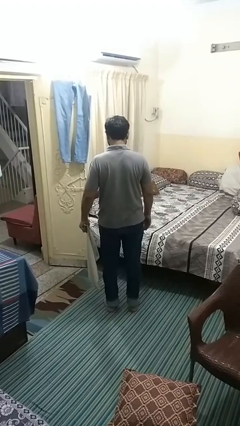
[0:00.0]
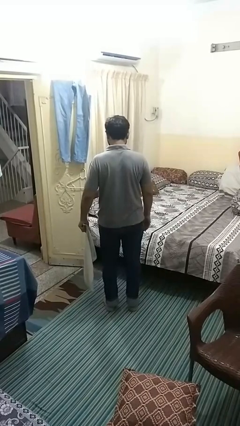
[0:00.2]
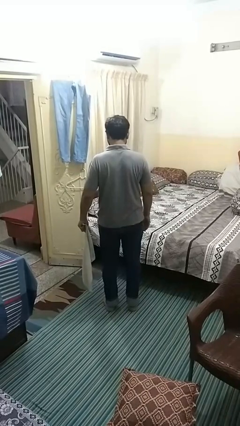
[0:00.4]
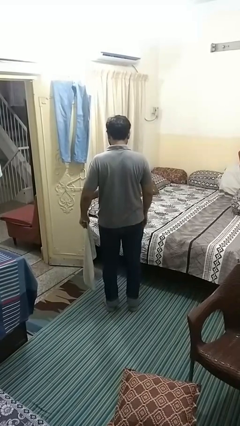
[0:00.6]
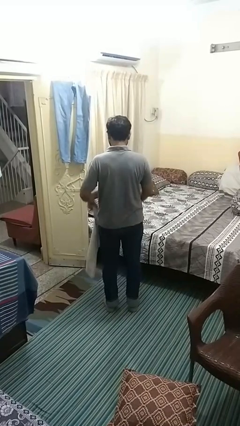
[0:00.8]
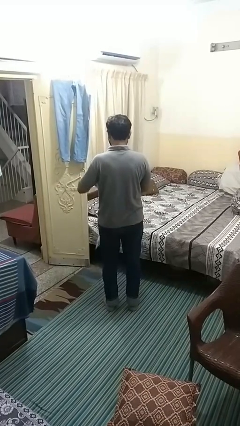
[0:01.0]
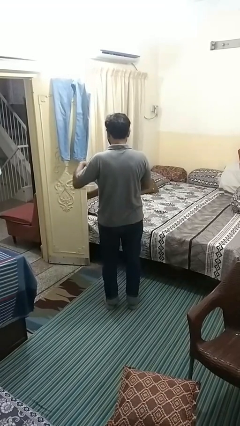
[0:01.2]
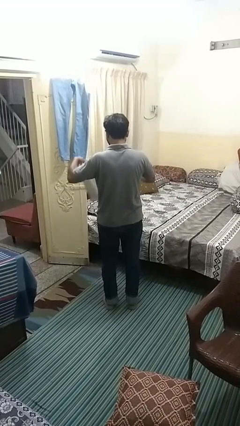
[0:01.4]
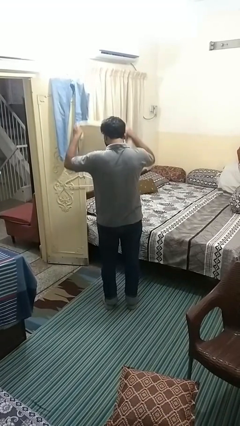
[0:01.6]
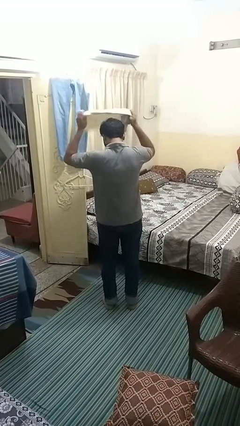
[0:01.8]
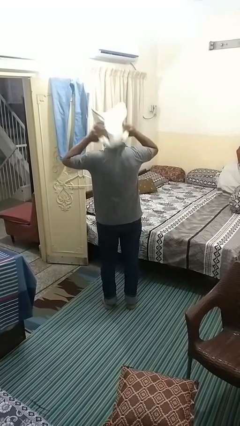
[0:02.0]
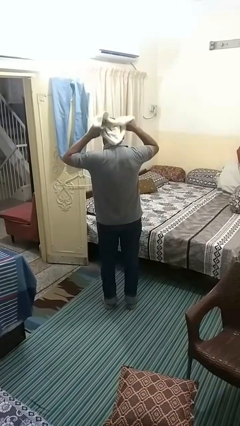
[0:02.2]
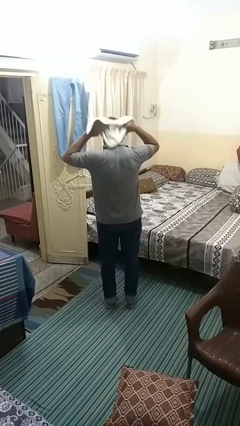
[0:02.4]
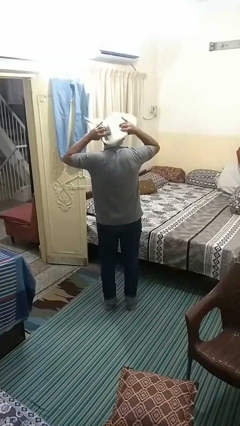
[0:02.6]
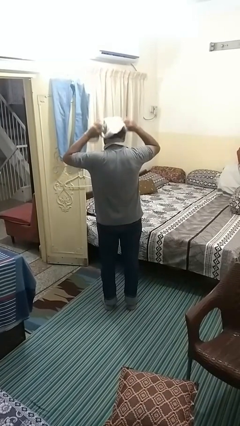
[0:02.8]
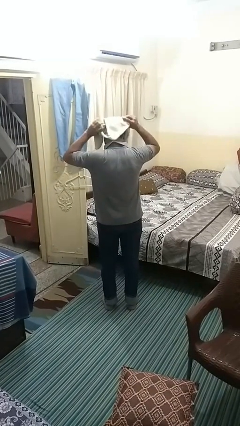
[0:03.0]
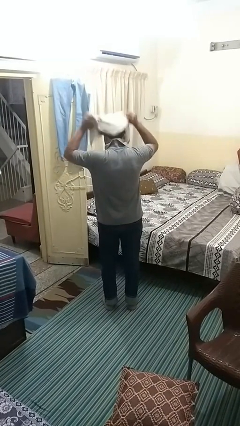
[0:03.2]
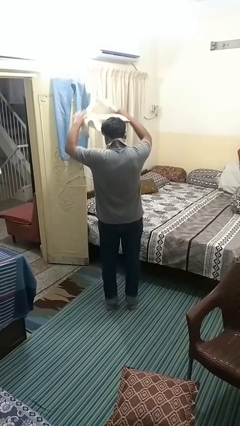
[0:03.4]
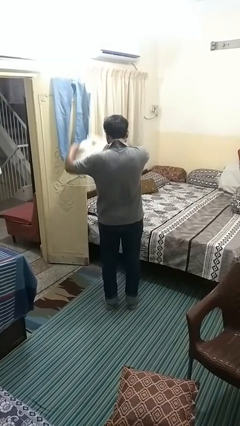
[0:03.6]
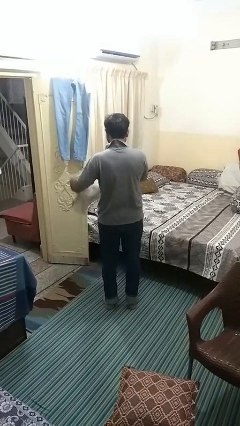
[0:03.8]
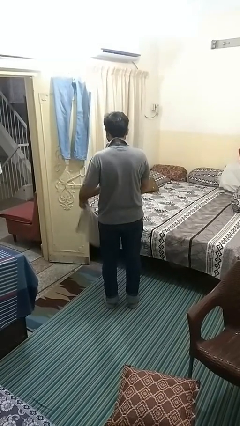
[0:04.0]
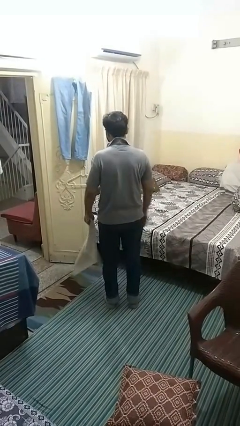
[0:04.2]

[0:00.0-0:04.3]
person dries hair with towel

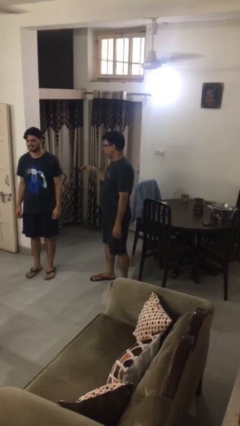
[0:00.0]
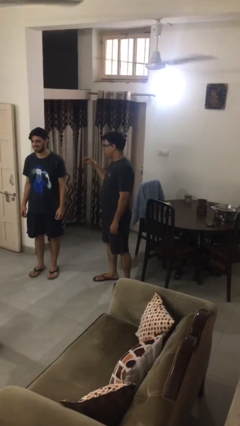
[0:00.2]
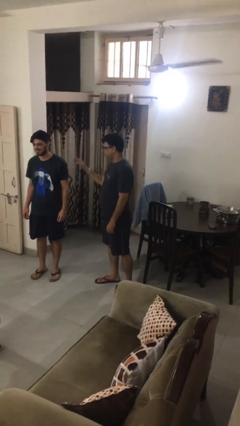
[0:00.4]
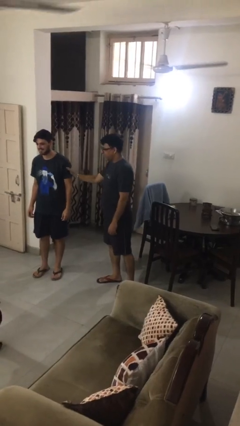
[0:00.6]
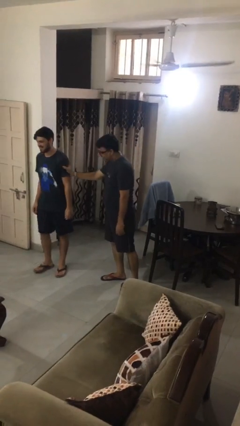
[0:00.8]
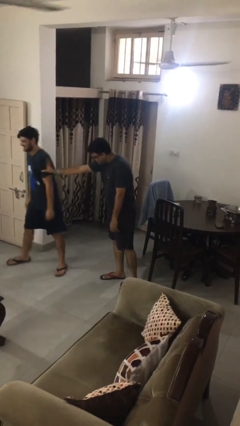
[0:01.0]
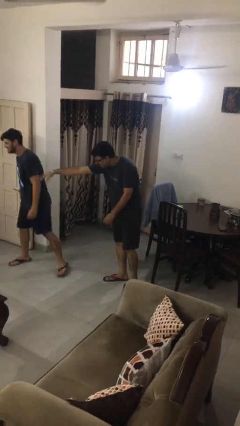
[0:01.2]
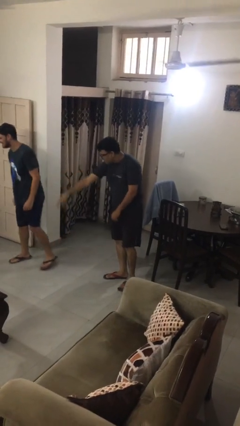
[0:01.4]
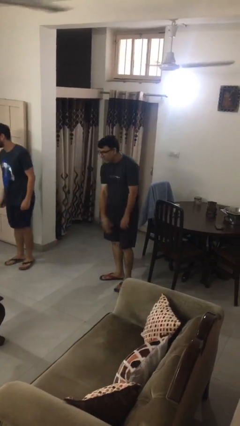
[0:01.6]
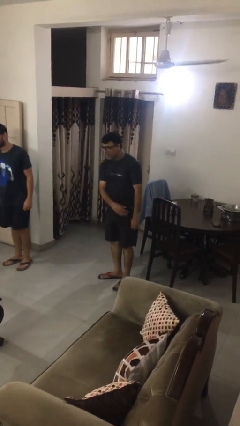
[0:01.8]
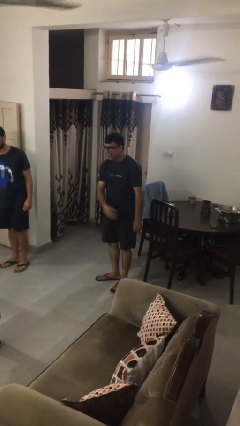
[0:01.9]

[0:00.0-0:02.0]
person shoves person

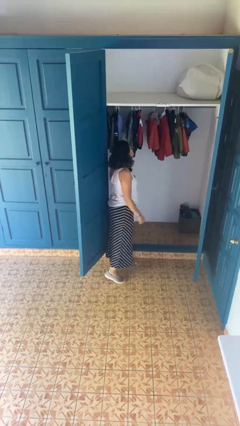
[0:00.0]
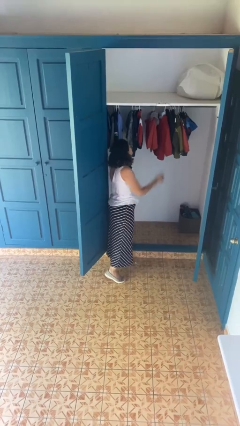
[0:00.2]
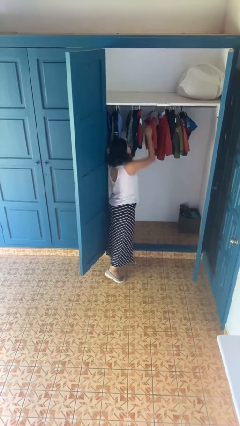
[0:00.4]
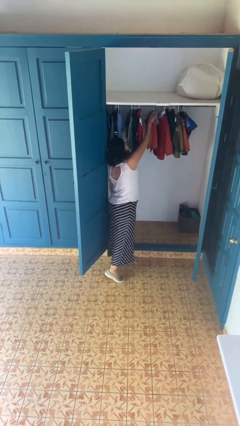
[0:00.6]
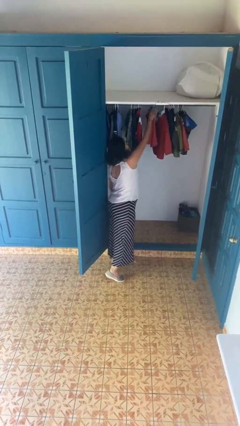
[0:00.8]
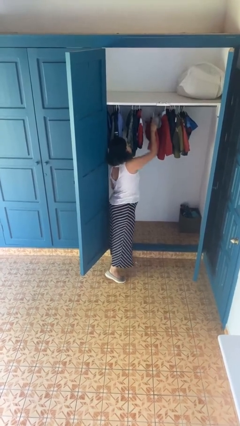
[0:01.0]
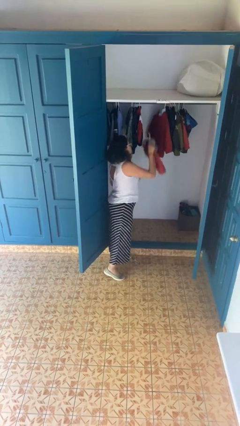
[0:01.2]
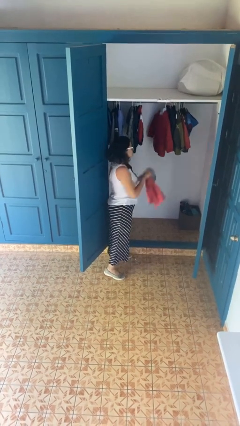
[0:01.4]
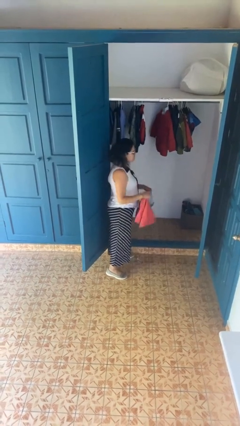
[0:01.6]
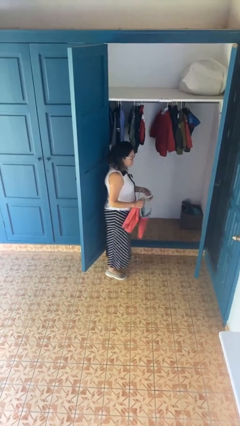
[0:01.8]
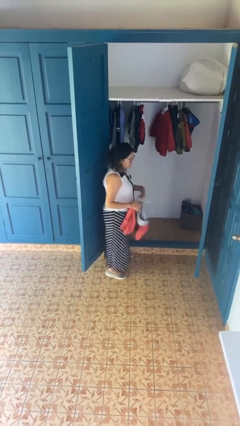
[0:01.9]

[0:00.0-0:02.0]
person takes clothes from closet

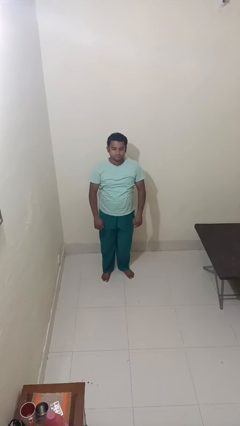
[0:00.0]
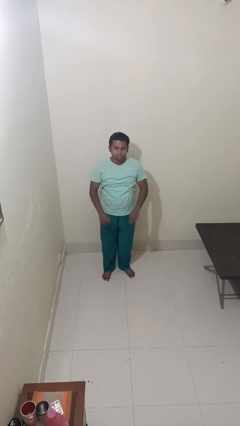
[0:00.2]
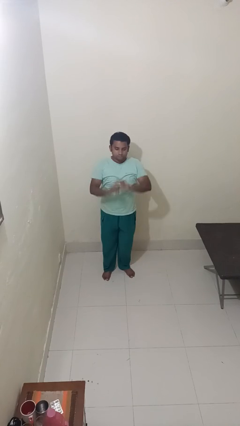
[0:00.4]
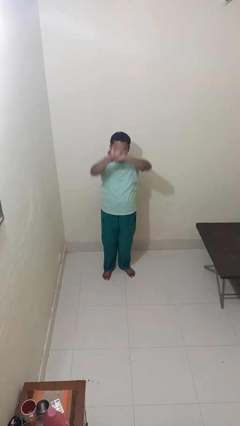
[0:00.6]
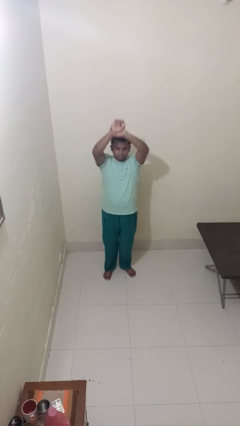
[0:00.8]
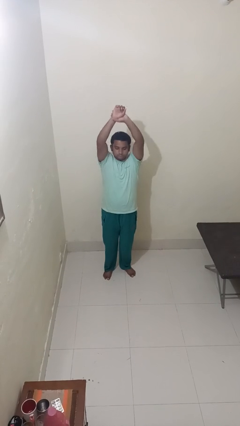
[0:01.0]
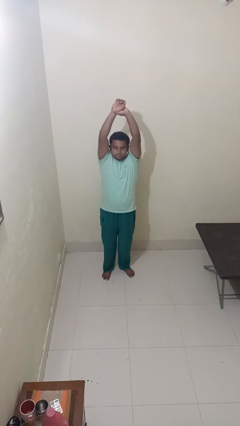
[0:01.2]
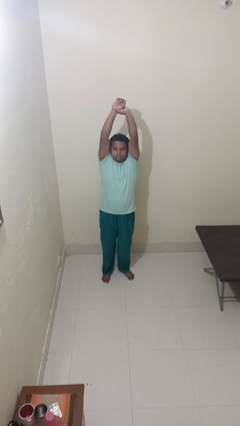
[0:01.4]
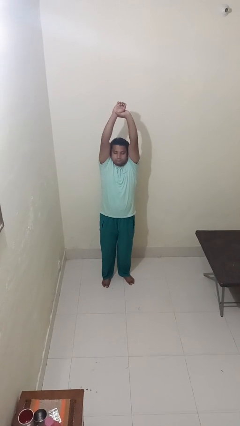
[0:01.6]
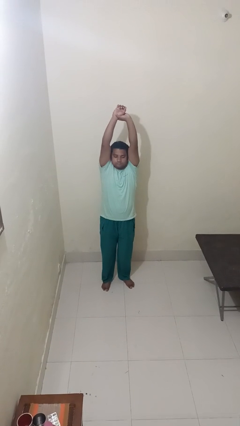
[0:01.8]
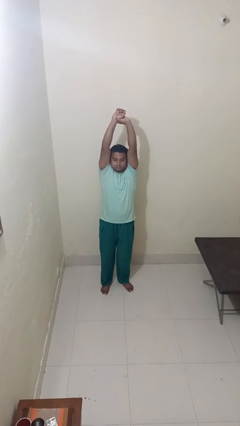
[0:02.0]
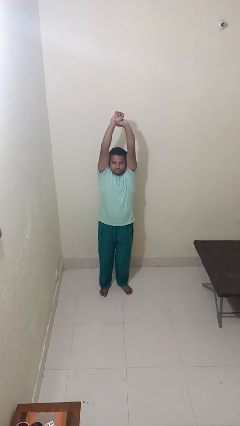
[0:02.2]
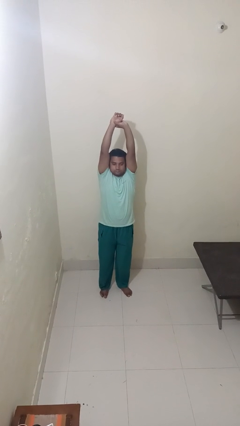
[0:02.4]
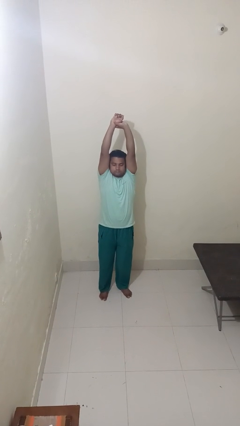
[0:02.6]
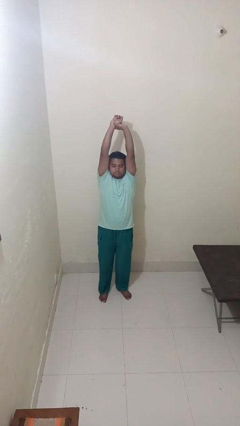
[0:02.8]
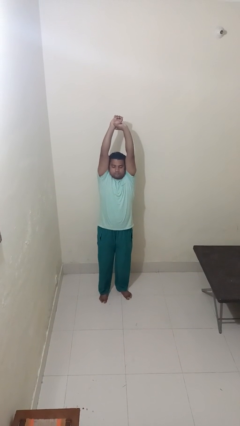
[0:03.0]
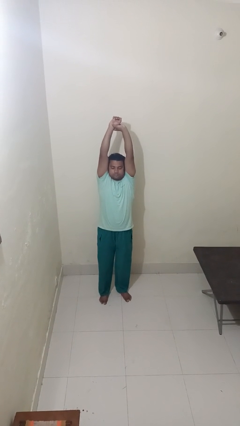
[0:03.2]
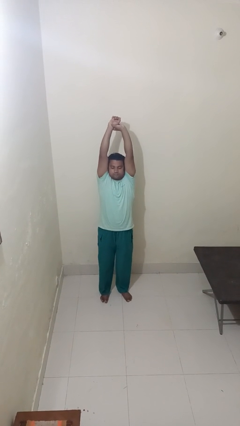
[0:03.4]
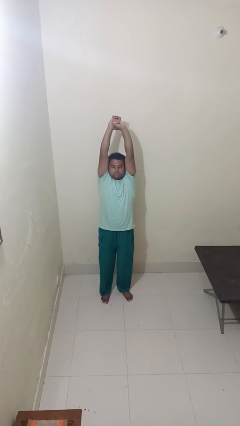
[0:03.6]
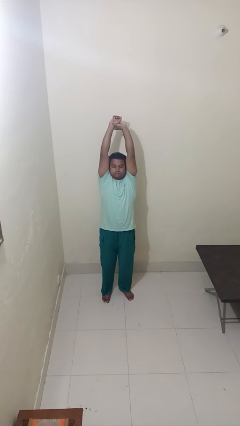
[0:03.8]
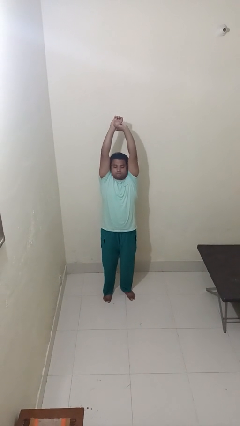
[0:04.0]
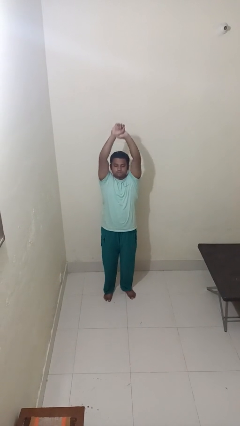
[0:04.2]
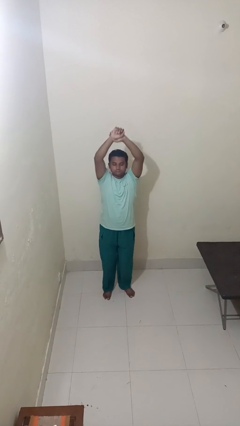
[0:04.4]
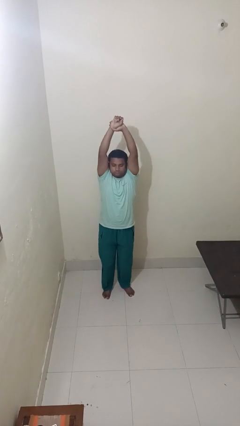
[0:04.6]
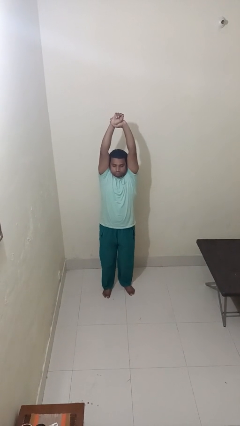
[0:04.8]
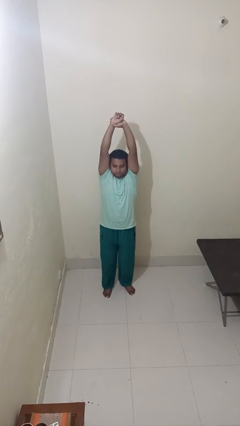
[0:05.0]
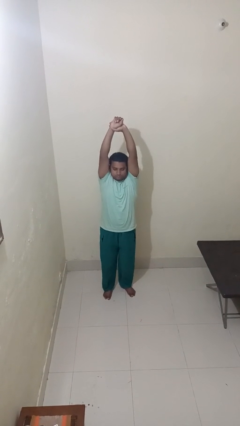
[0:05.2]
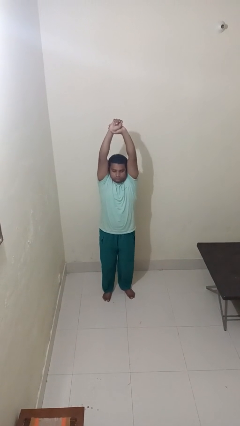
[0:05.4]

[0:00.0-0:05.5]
person stretches arms over head

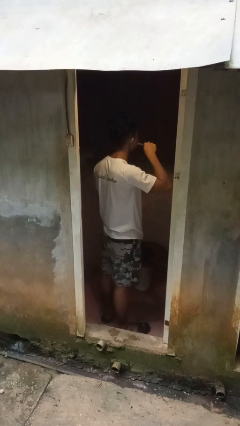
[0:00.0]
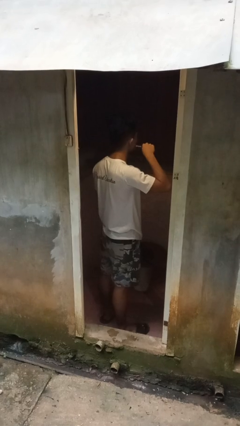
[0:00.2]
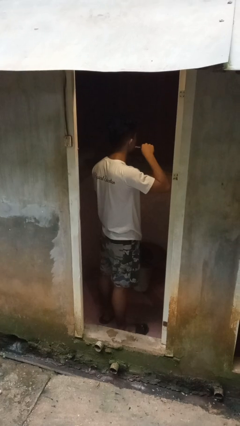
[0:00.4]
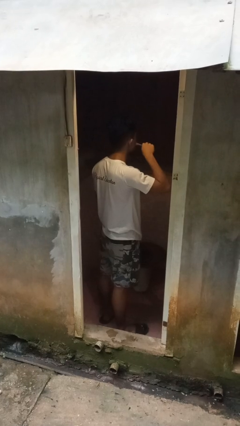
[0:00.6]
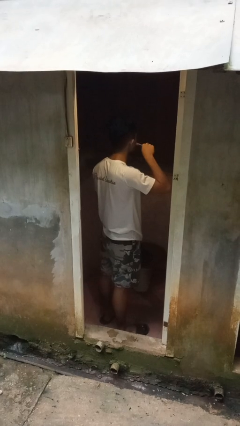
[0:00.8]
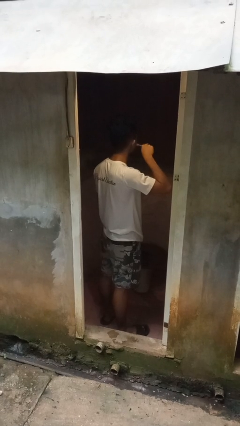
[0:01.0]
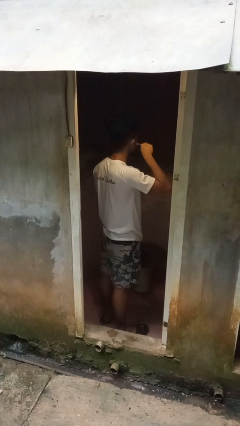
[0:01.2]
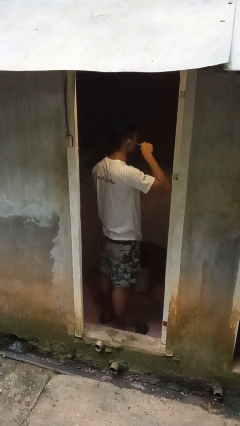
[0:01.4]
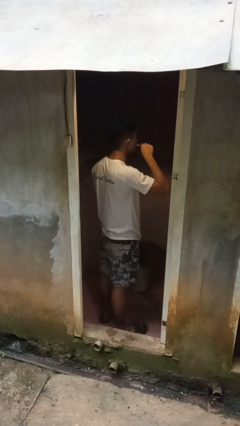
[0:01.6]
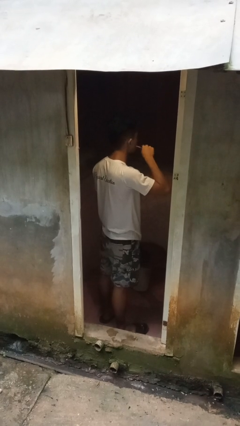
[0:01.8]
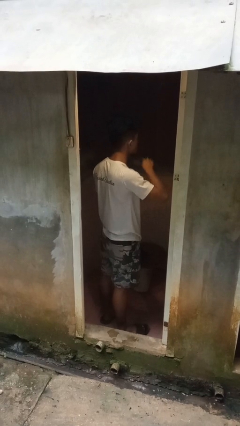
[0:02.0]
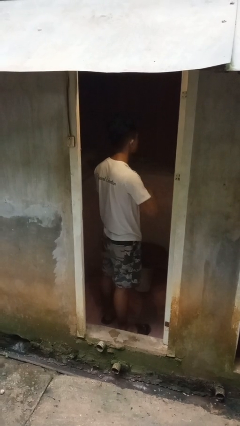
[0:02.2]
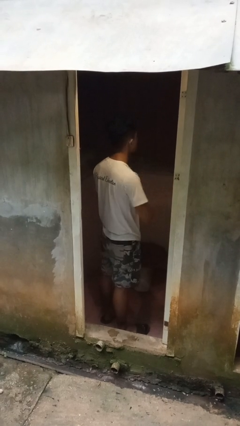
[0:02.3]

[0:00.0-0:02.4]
person brushes teeth

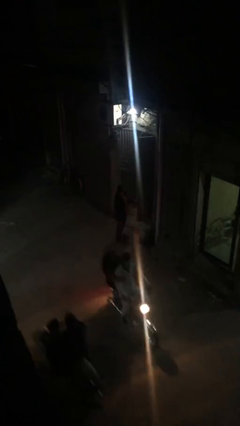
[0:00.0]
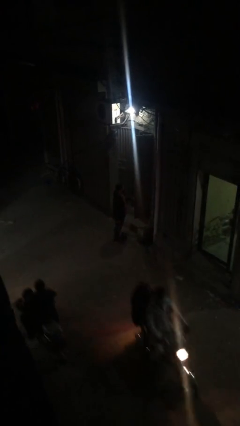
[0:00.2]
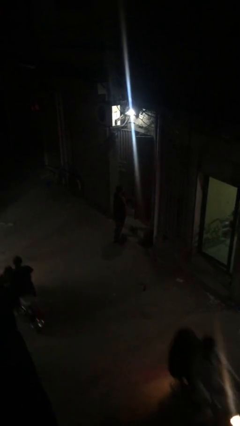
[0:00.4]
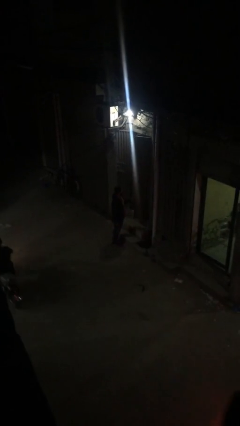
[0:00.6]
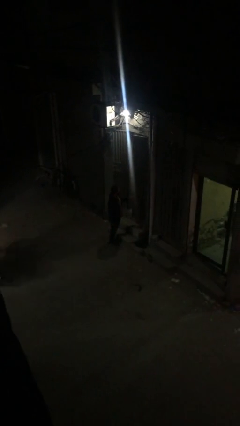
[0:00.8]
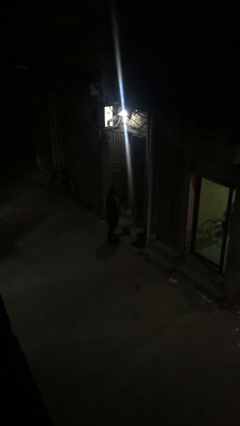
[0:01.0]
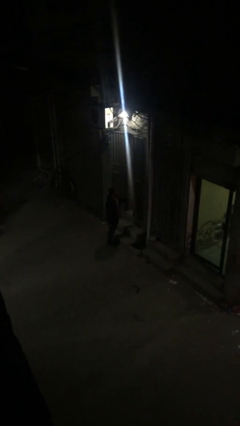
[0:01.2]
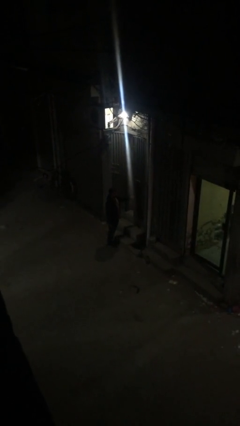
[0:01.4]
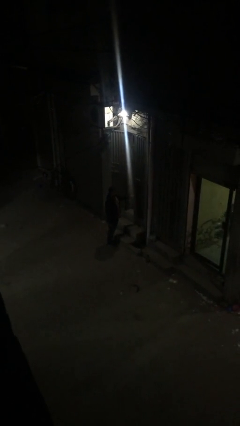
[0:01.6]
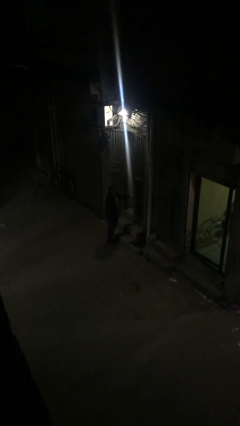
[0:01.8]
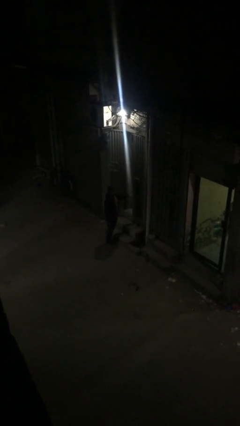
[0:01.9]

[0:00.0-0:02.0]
person closes facility door
